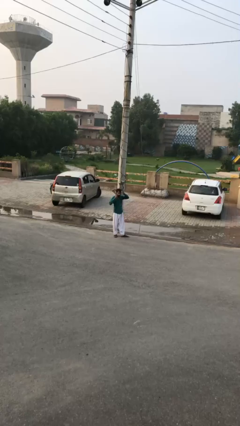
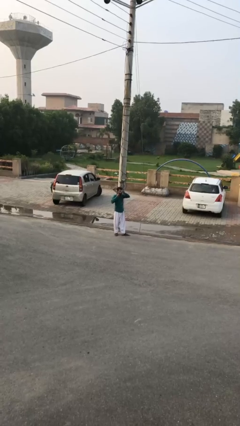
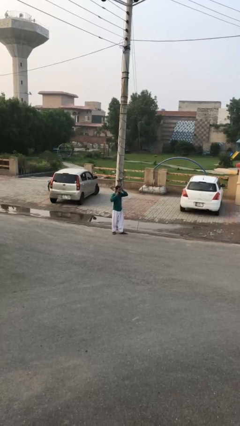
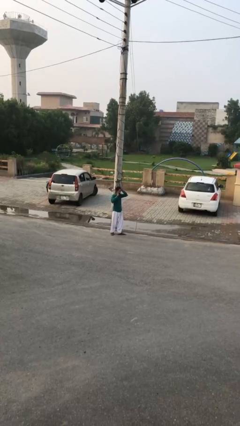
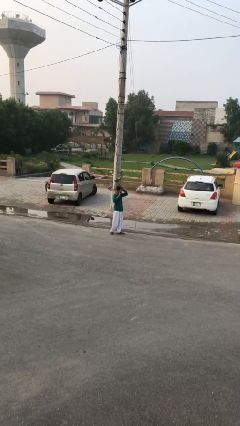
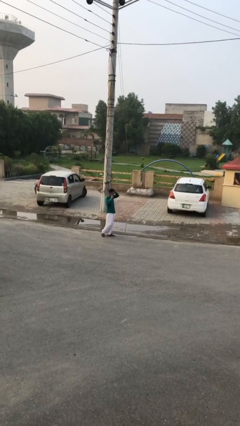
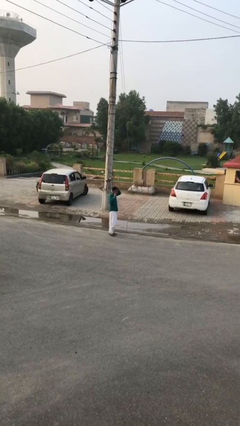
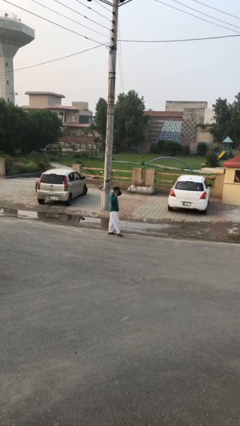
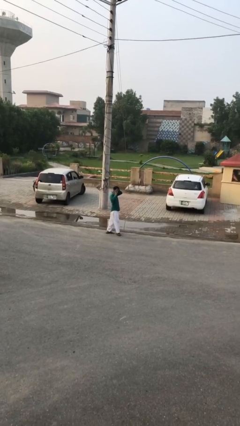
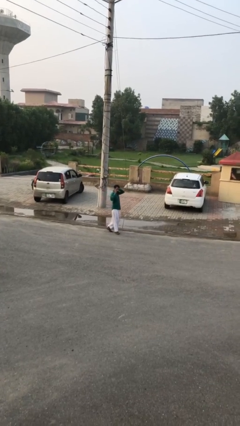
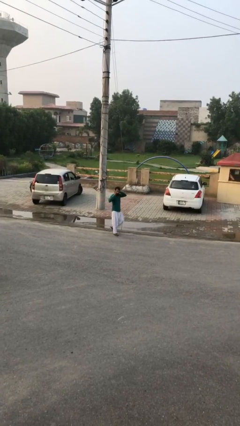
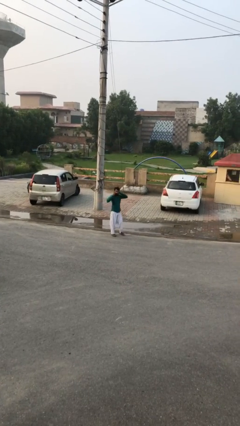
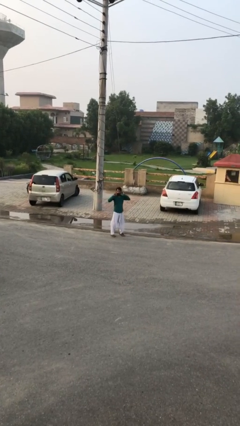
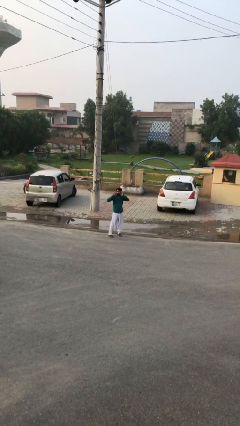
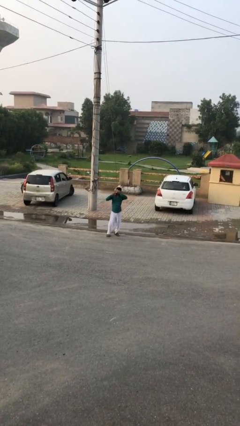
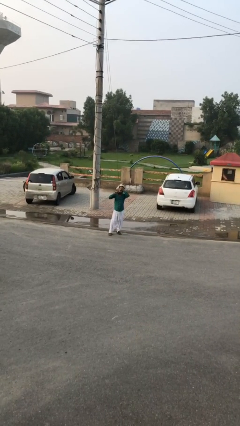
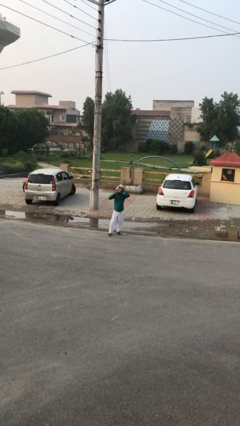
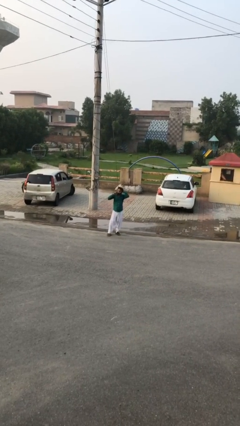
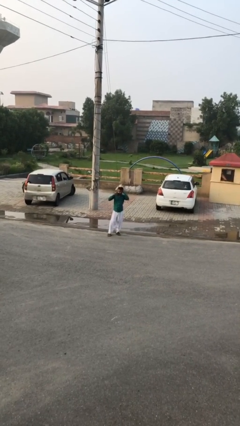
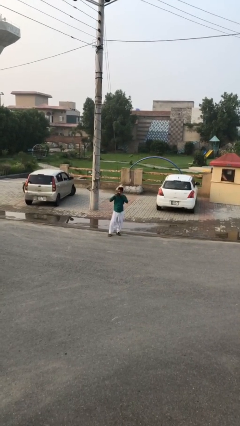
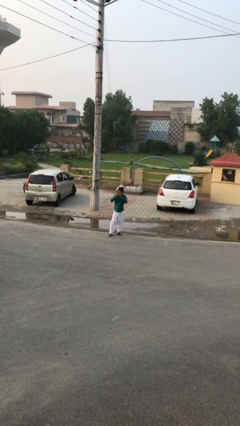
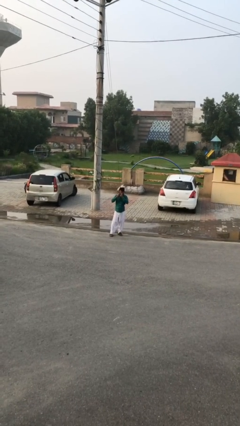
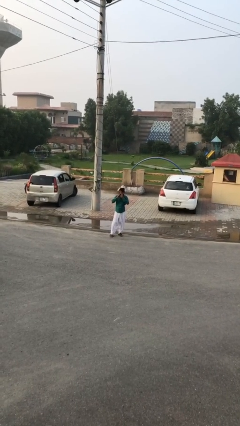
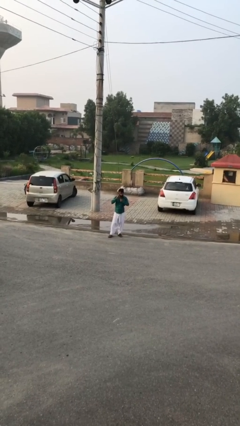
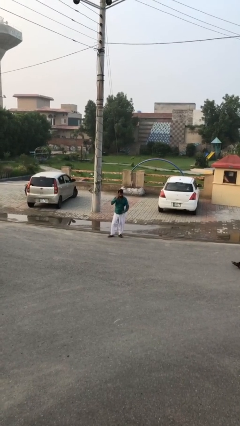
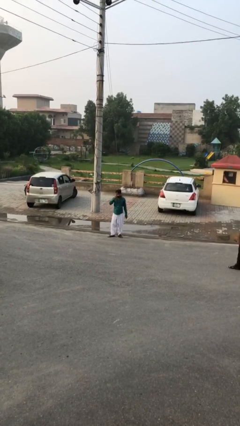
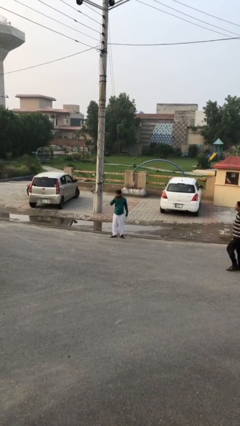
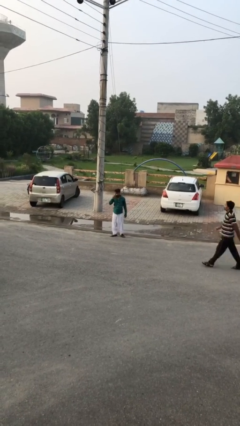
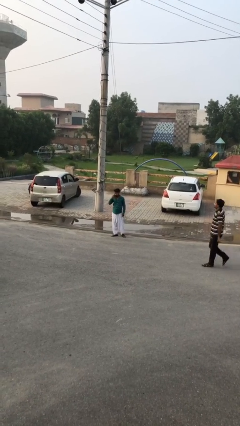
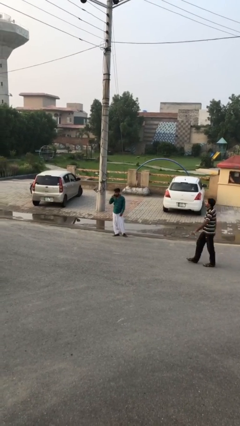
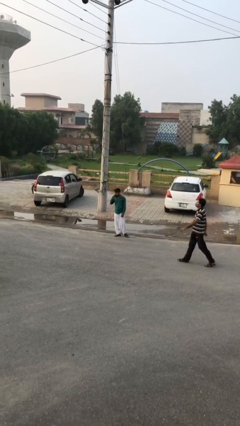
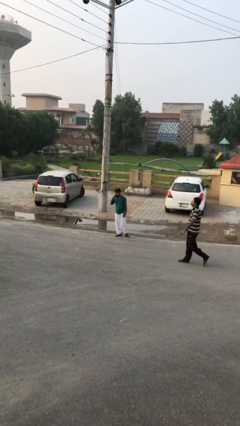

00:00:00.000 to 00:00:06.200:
person talks on phone

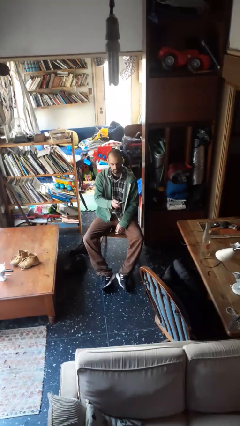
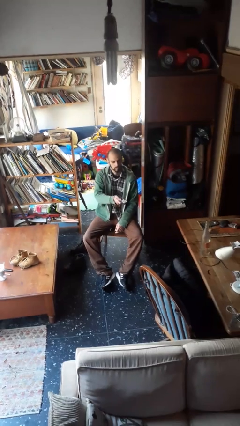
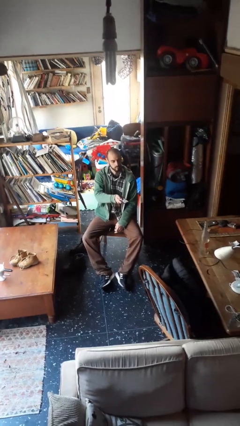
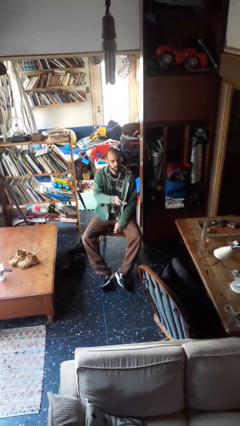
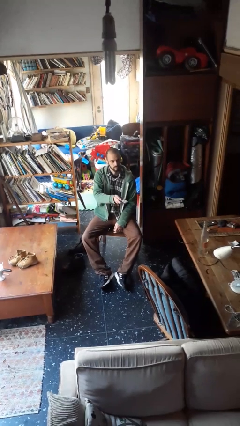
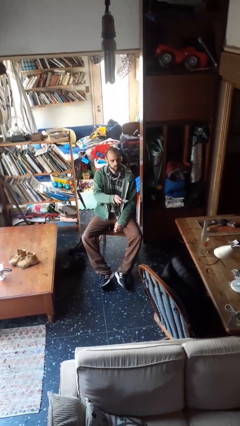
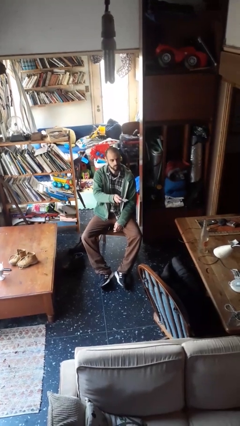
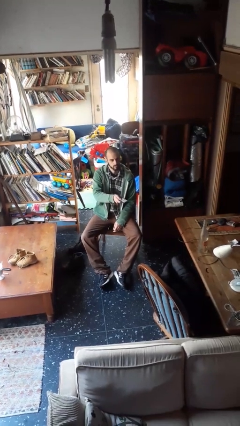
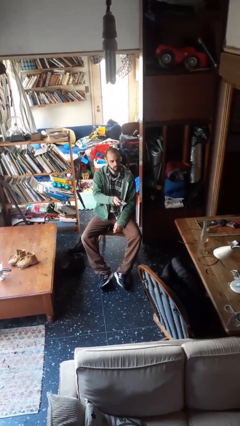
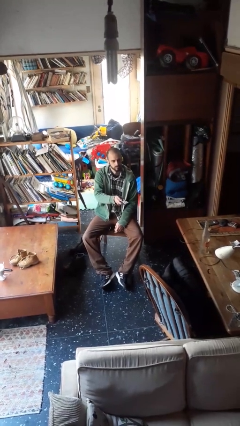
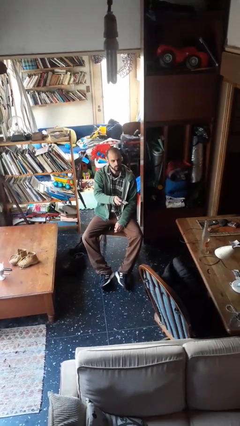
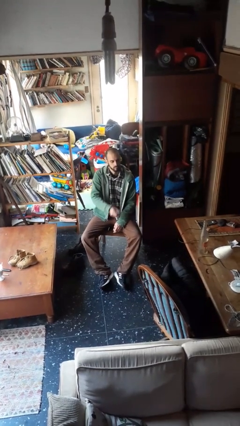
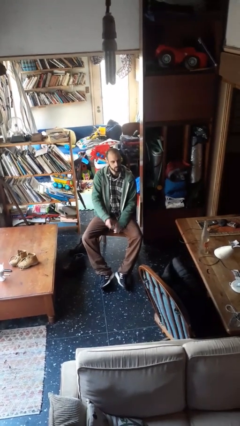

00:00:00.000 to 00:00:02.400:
person uses television remote

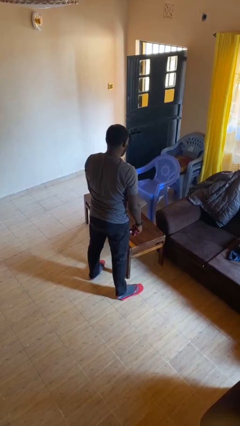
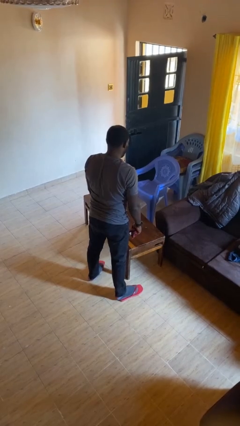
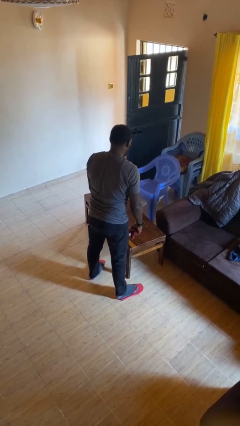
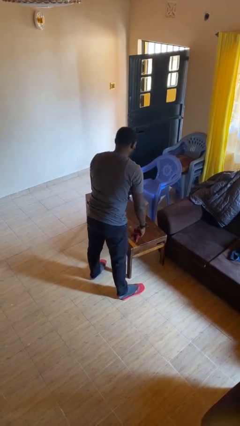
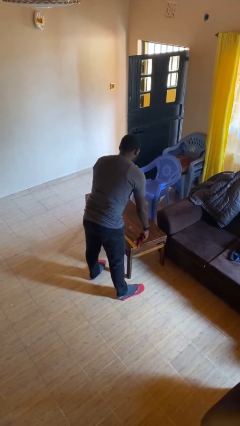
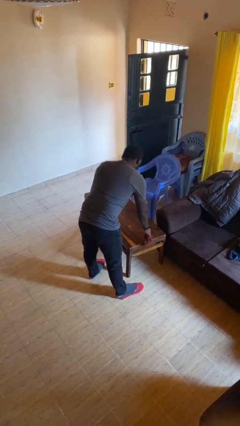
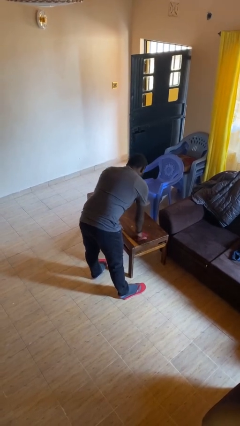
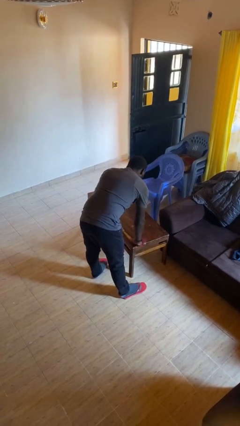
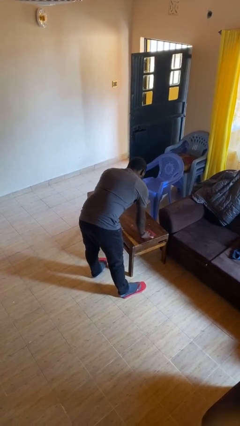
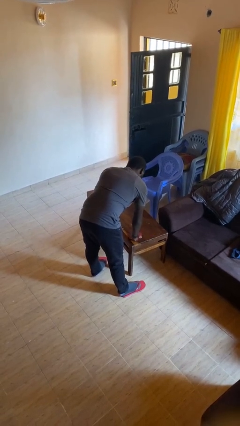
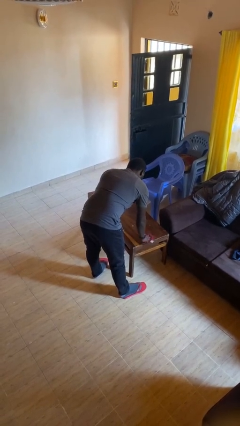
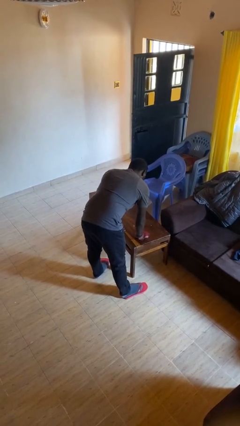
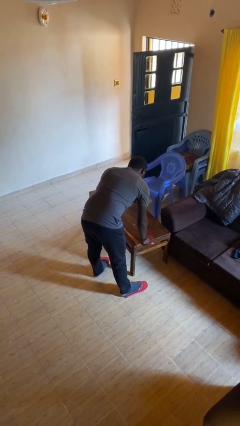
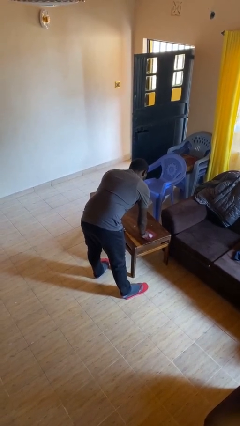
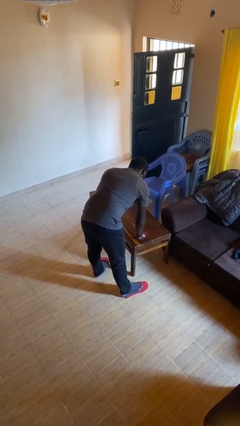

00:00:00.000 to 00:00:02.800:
person cleans table with rag

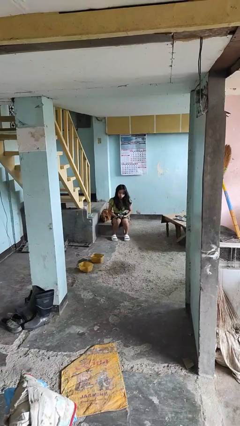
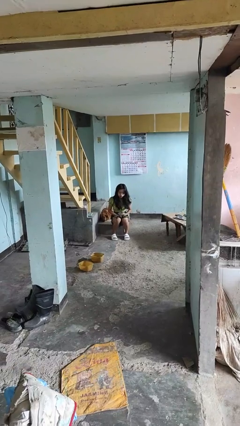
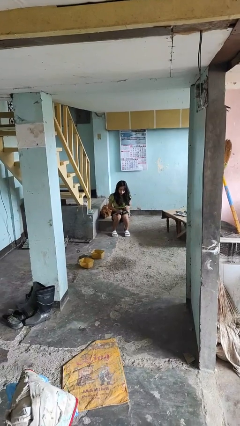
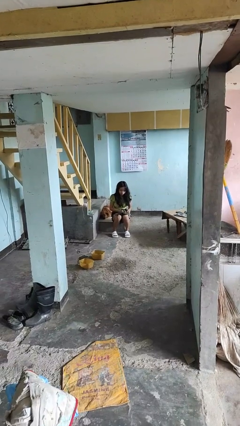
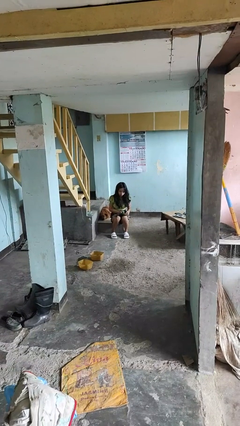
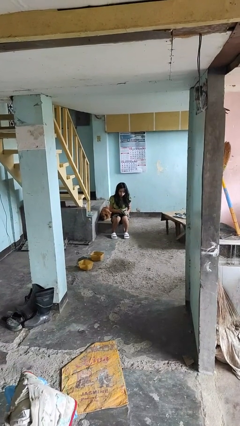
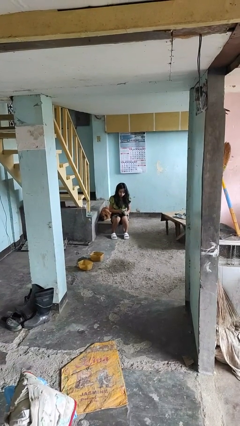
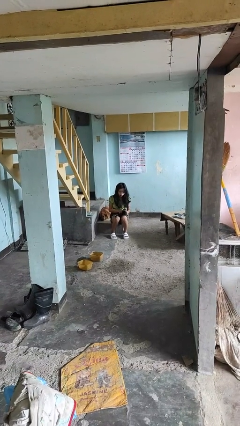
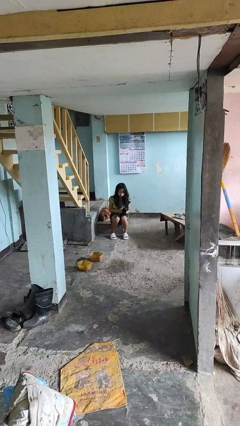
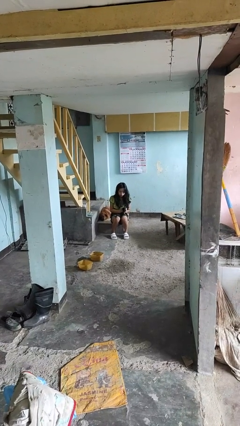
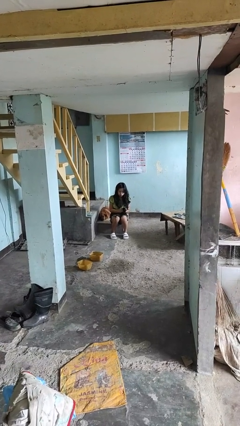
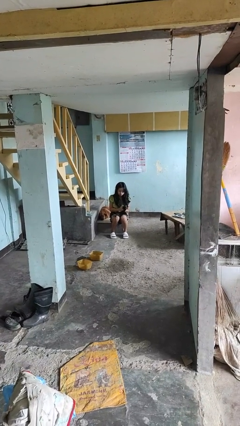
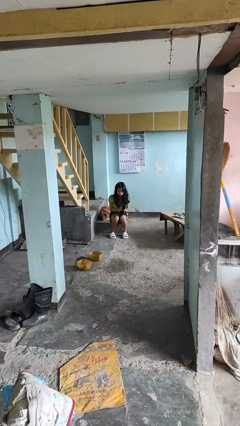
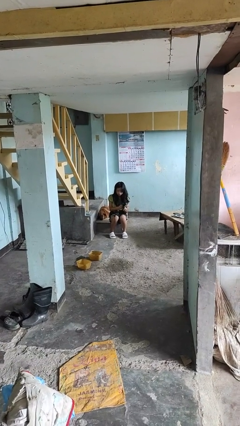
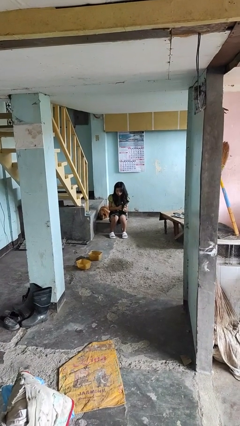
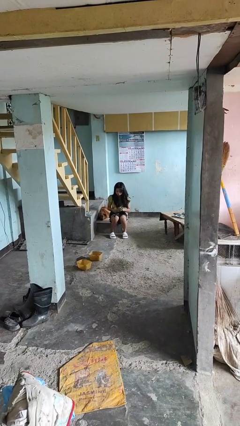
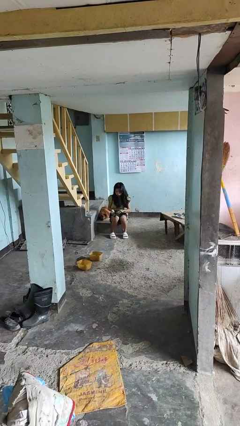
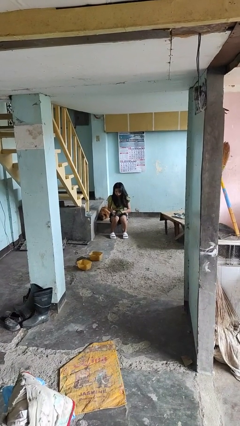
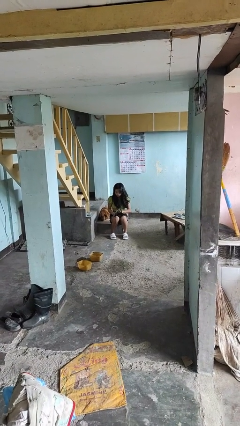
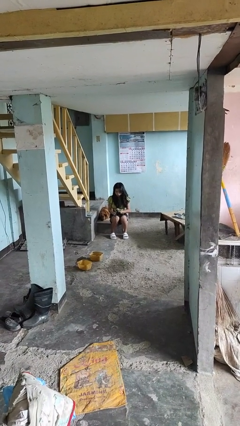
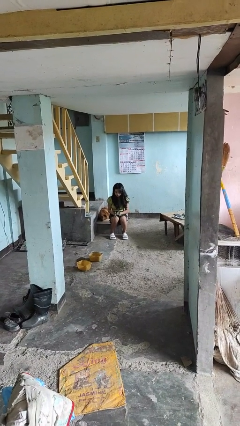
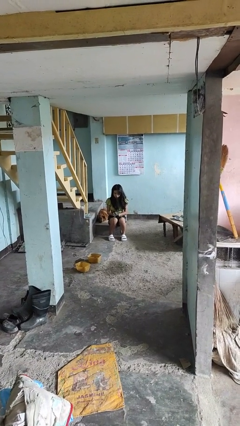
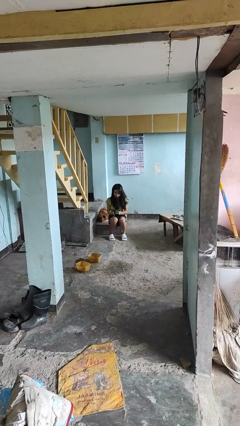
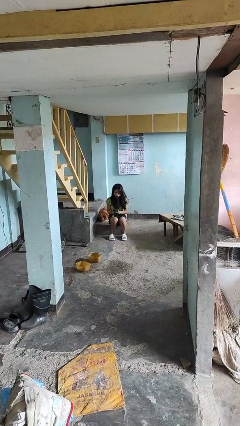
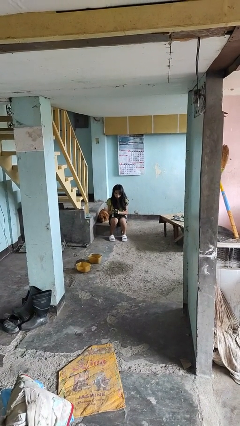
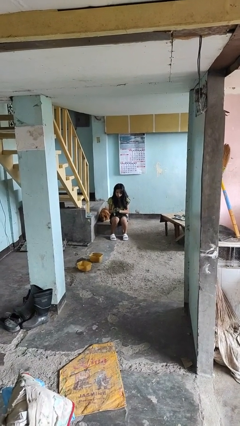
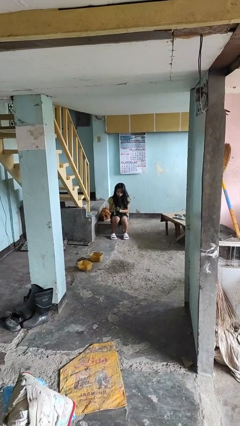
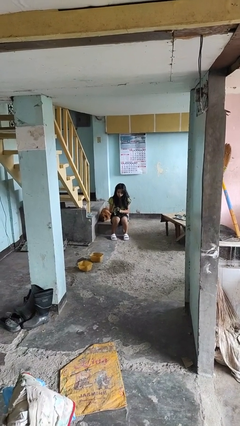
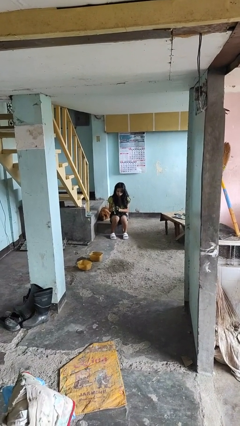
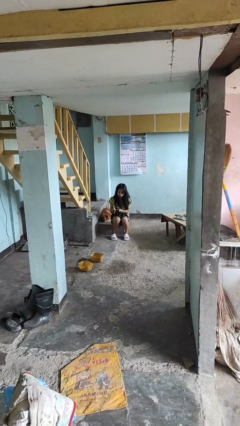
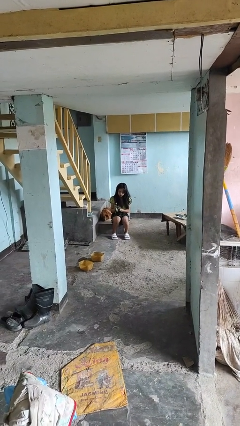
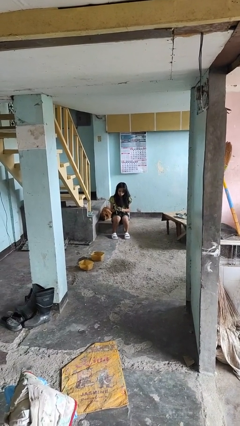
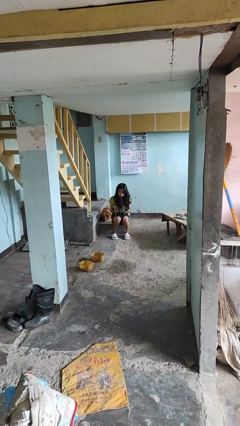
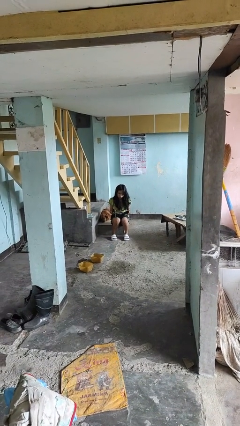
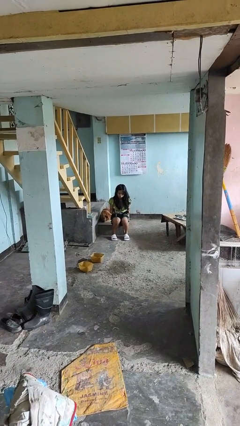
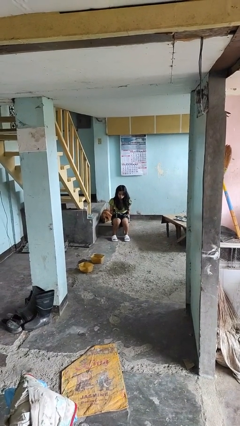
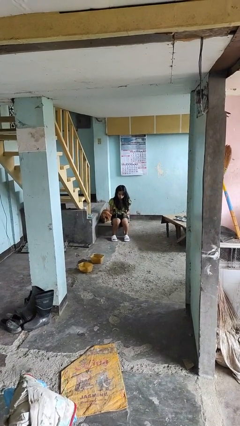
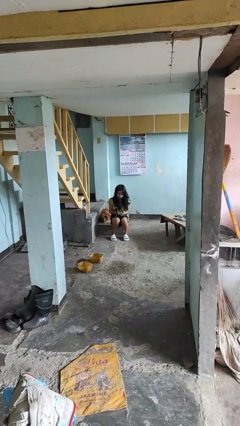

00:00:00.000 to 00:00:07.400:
person puts on gloves
